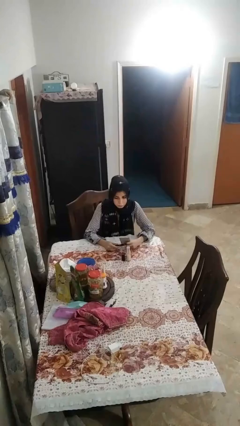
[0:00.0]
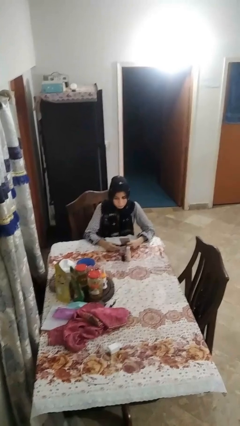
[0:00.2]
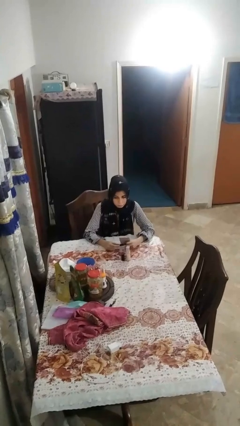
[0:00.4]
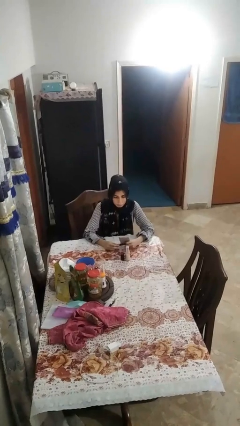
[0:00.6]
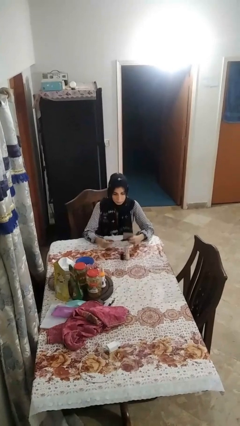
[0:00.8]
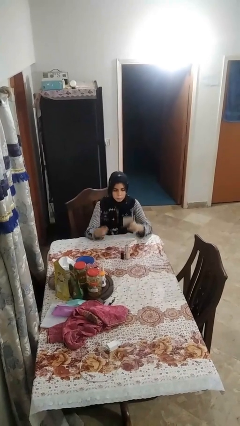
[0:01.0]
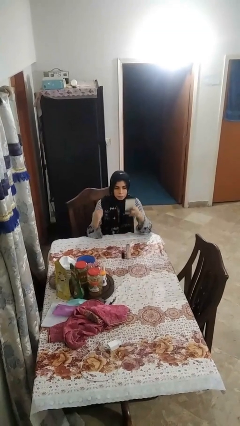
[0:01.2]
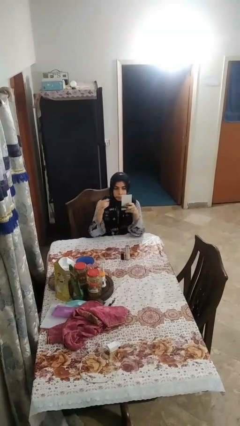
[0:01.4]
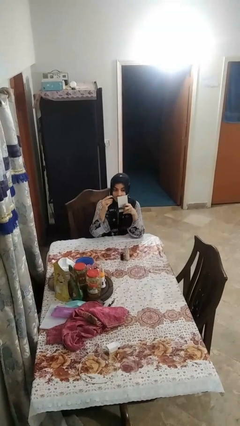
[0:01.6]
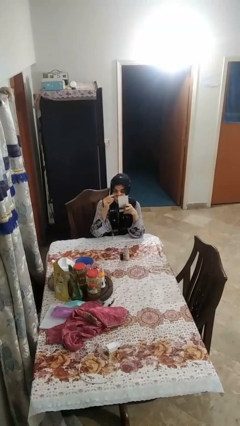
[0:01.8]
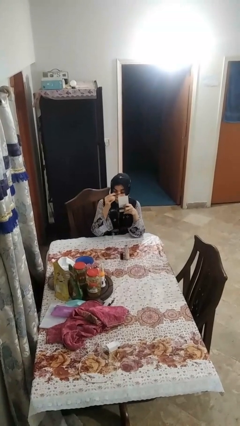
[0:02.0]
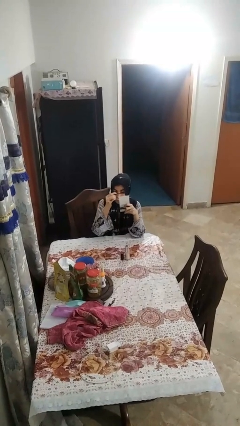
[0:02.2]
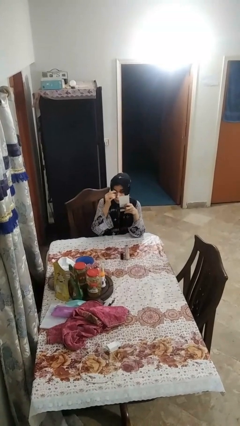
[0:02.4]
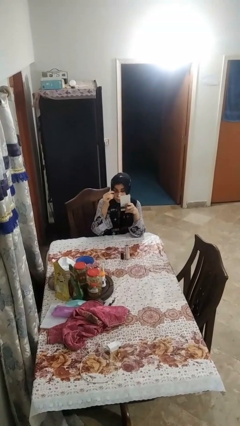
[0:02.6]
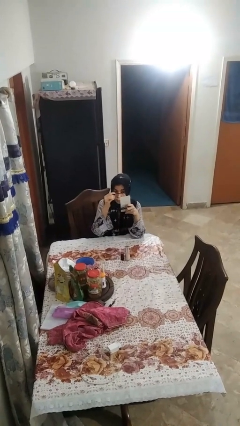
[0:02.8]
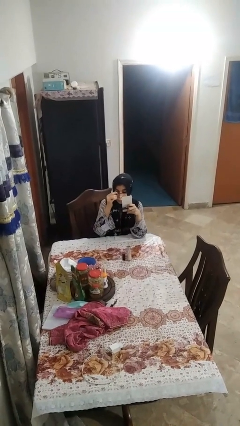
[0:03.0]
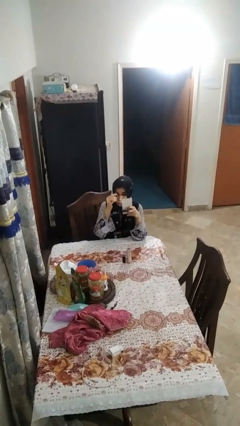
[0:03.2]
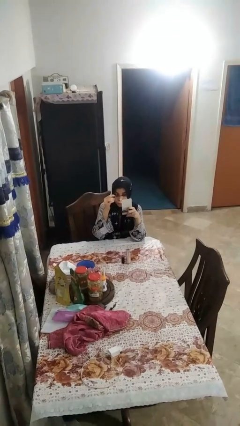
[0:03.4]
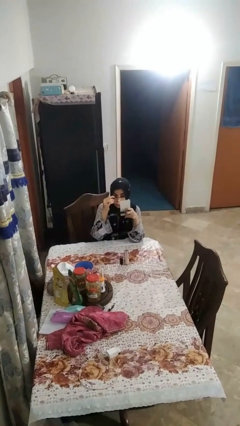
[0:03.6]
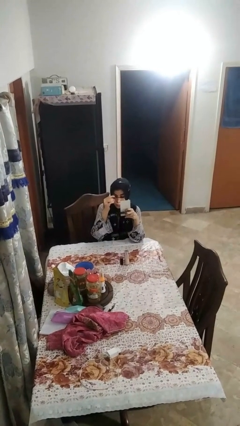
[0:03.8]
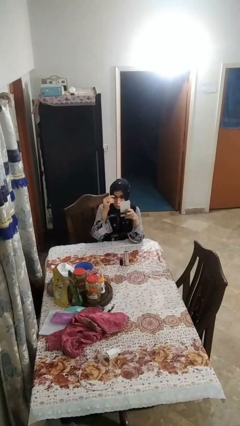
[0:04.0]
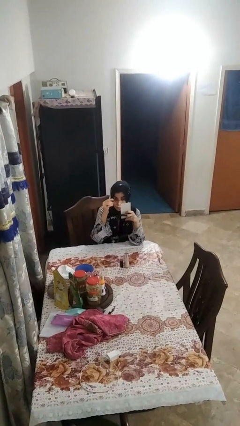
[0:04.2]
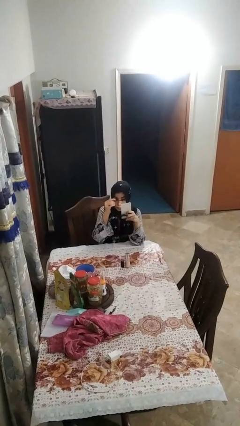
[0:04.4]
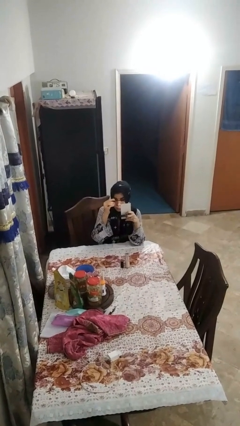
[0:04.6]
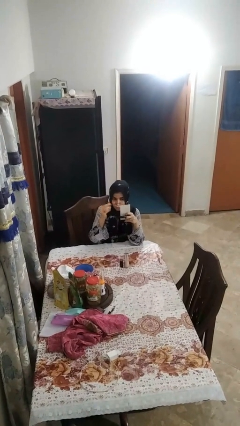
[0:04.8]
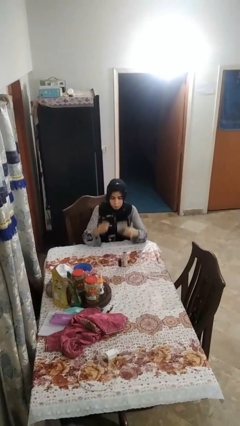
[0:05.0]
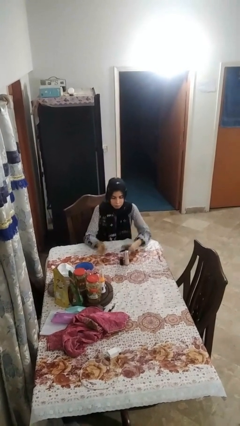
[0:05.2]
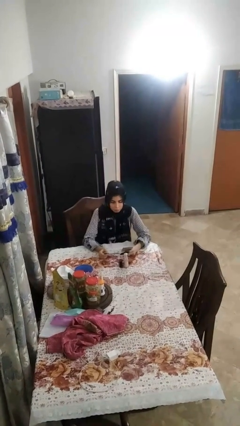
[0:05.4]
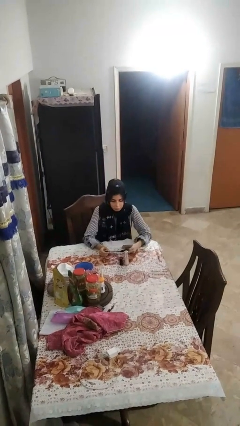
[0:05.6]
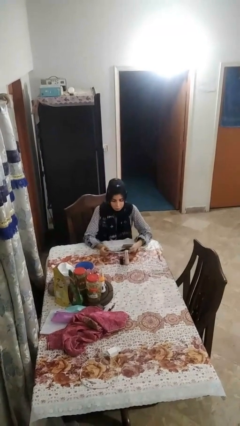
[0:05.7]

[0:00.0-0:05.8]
person applies eye makeup

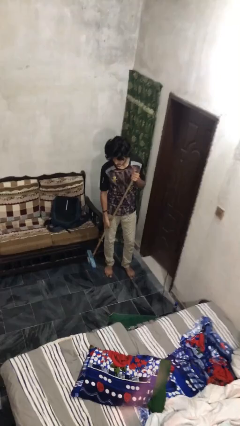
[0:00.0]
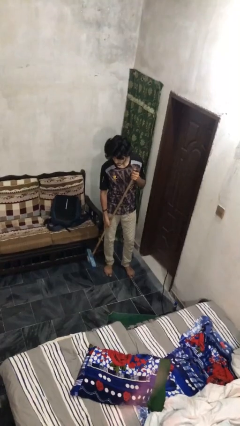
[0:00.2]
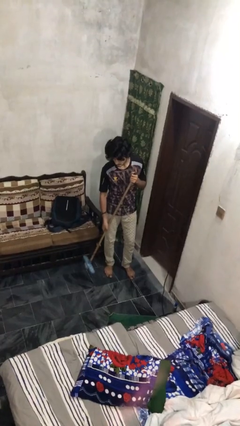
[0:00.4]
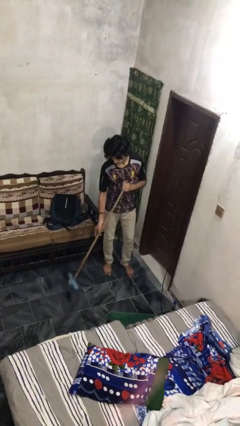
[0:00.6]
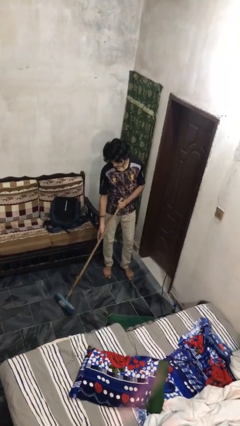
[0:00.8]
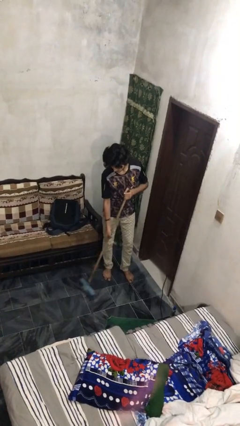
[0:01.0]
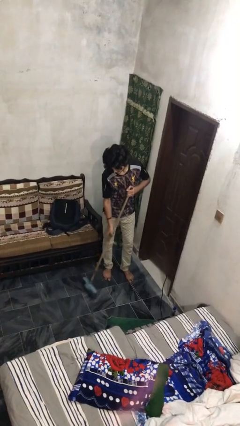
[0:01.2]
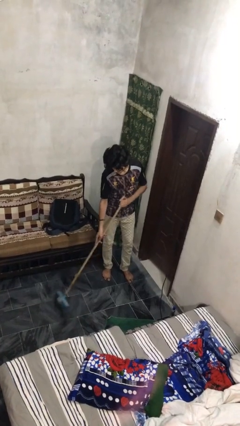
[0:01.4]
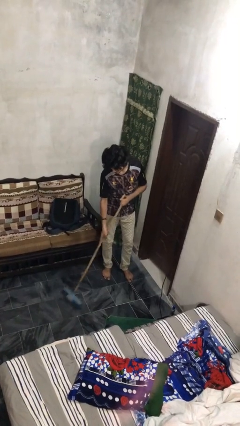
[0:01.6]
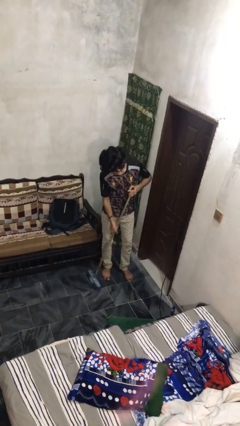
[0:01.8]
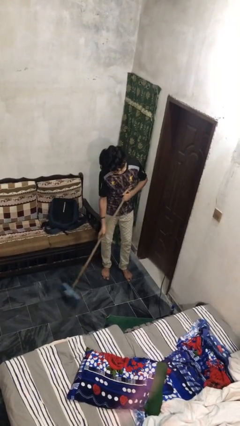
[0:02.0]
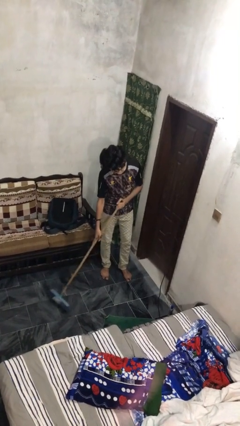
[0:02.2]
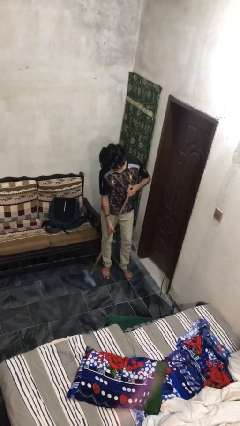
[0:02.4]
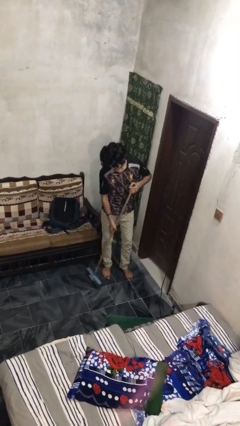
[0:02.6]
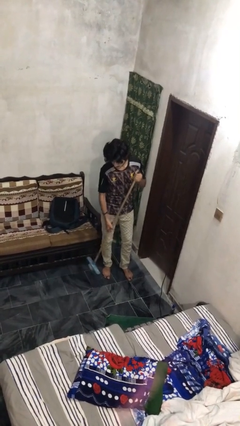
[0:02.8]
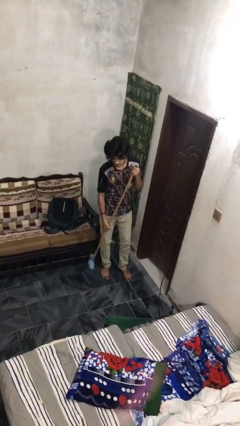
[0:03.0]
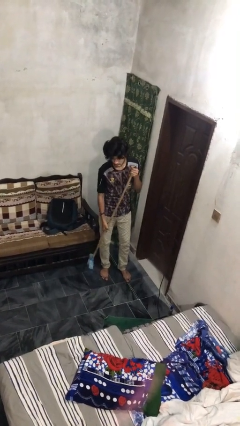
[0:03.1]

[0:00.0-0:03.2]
person sweeps floor

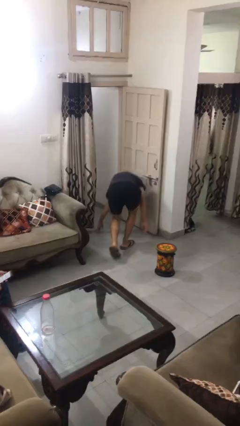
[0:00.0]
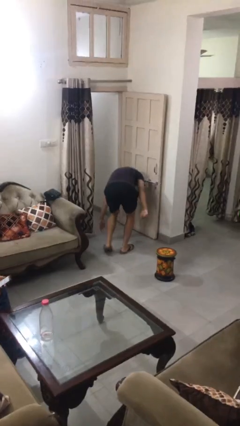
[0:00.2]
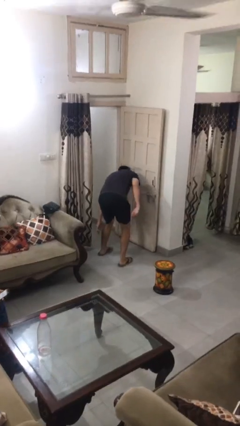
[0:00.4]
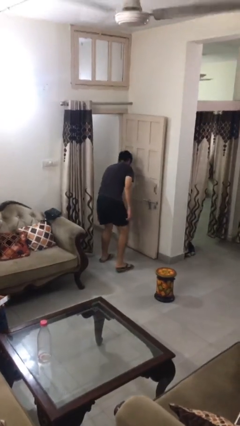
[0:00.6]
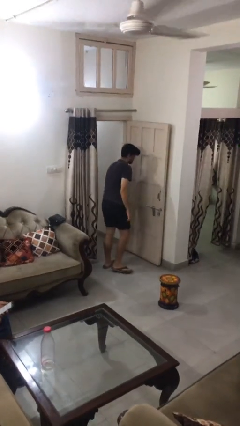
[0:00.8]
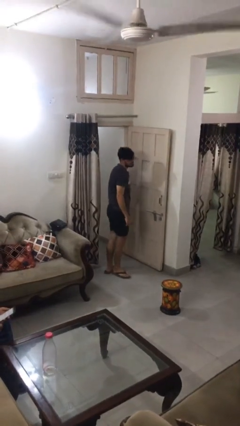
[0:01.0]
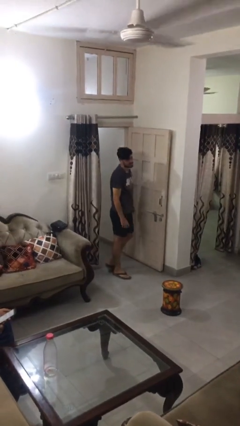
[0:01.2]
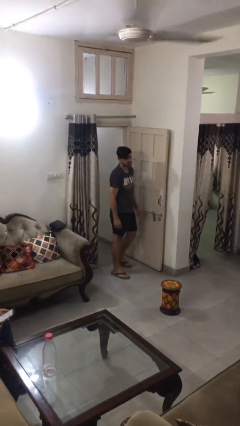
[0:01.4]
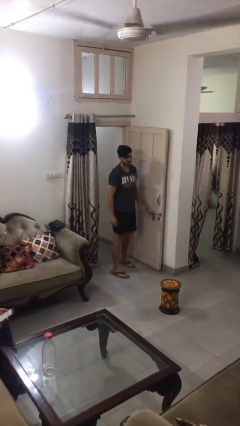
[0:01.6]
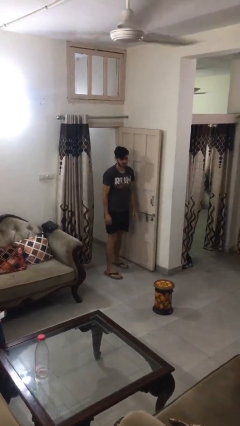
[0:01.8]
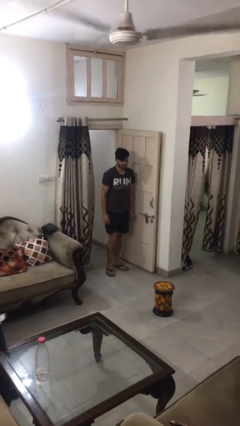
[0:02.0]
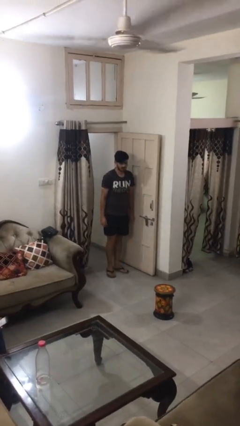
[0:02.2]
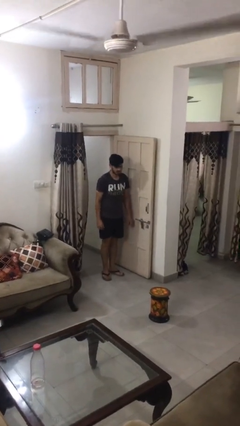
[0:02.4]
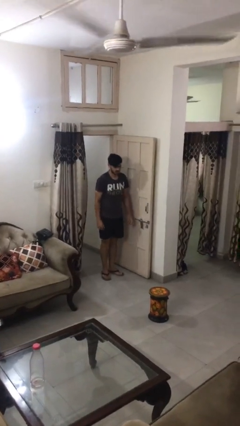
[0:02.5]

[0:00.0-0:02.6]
person stands up from floor

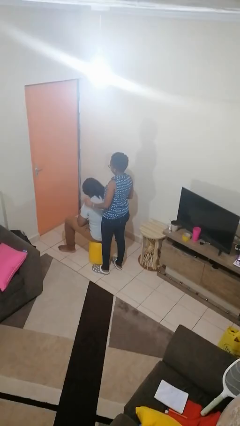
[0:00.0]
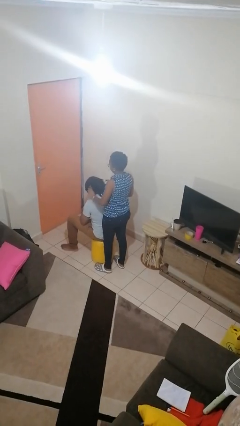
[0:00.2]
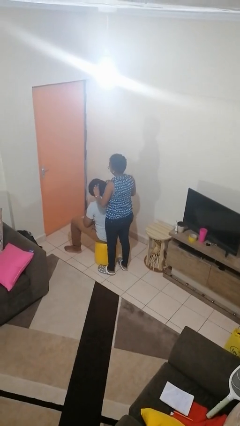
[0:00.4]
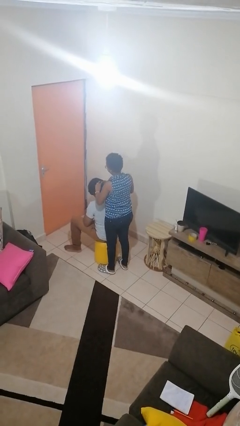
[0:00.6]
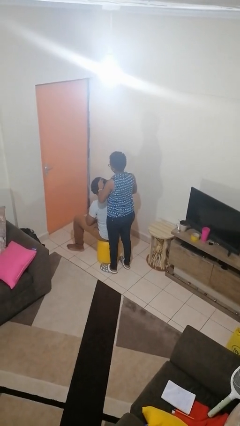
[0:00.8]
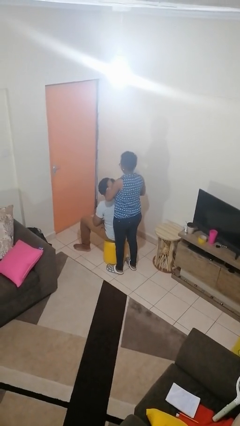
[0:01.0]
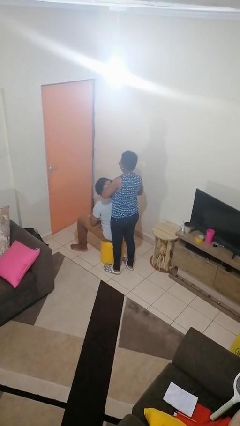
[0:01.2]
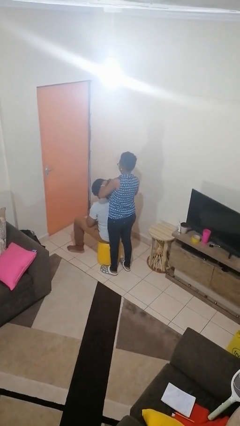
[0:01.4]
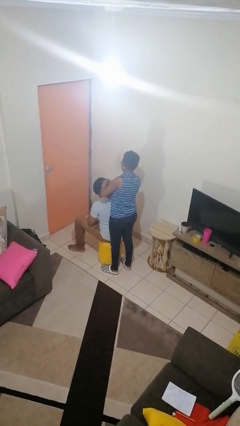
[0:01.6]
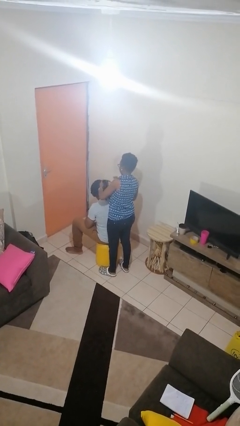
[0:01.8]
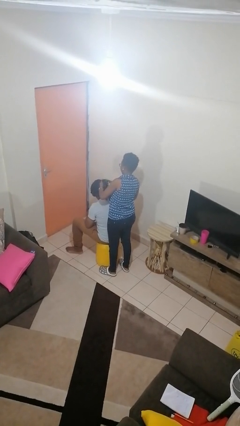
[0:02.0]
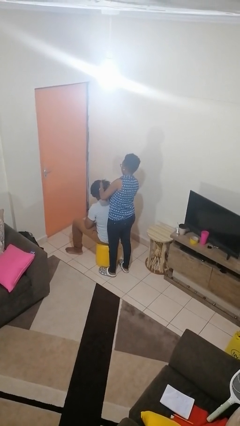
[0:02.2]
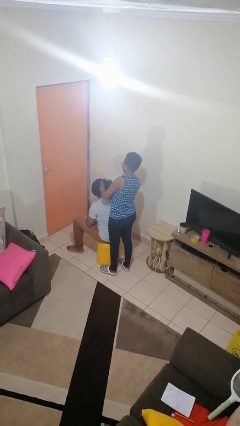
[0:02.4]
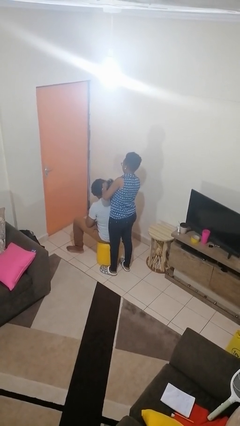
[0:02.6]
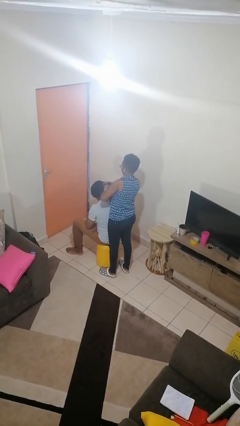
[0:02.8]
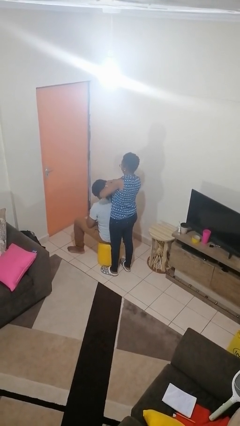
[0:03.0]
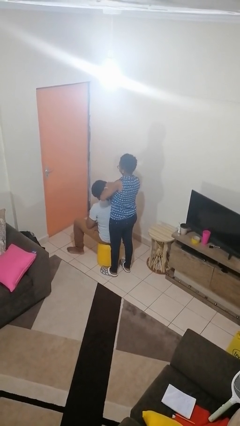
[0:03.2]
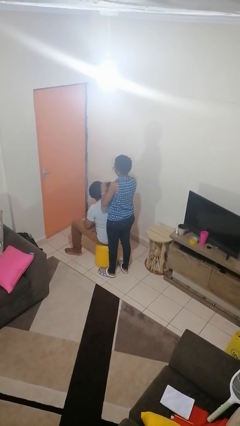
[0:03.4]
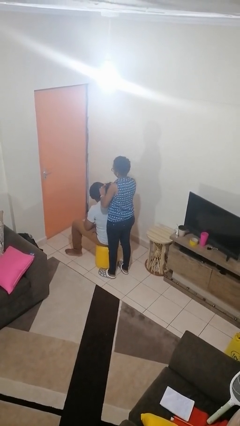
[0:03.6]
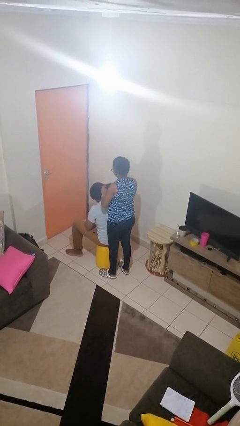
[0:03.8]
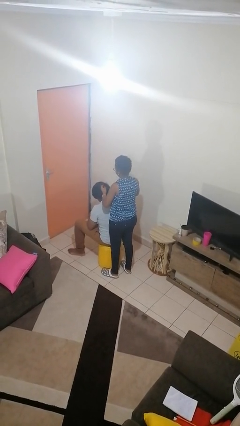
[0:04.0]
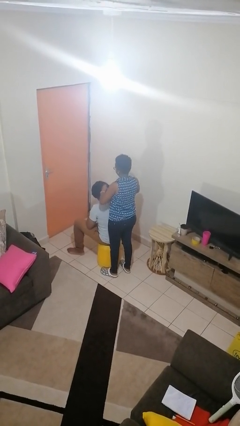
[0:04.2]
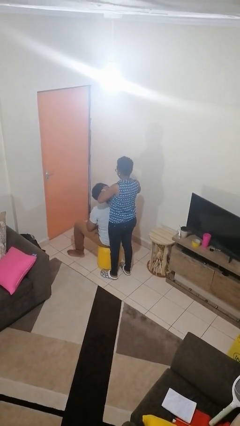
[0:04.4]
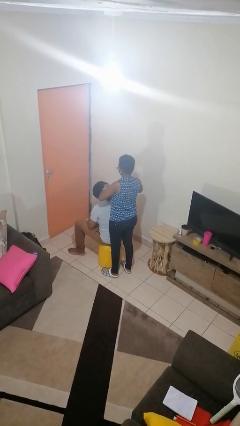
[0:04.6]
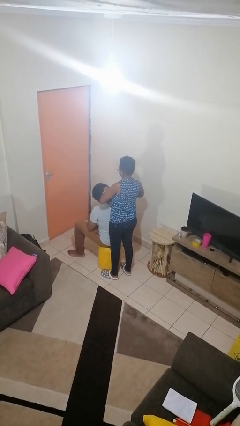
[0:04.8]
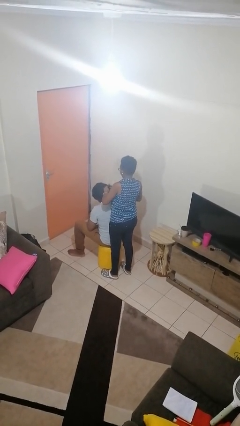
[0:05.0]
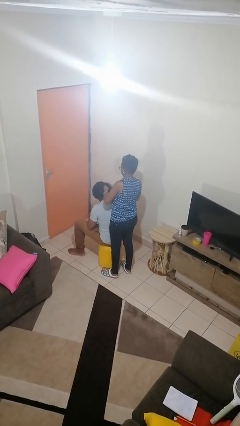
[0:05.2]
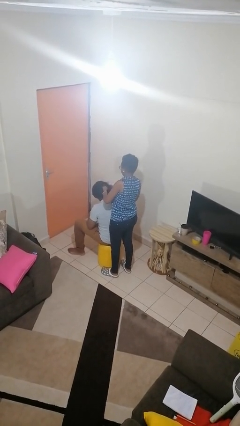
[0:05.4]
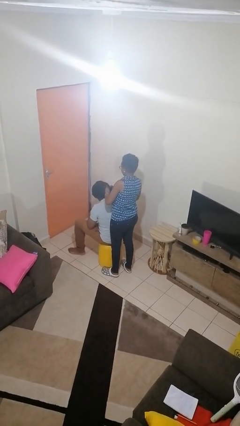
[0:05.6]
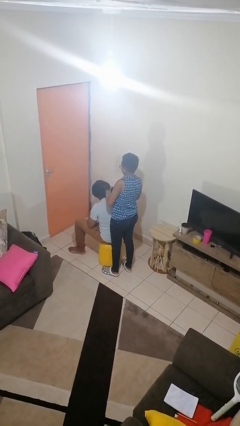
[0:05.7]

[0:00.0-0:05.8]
person braids hair of person

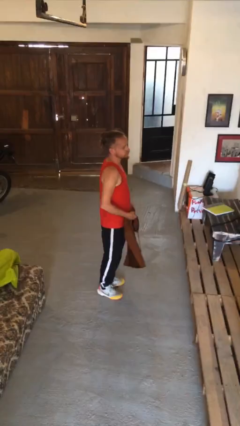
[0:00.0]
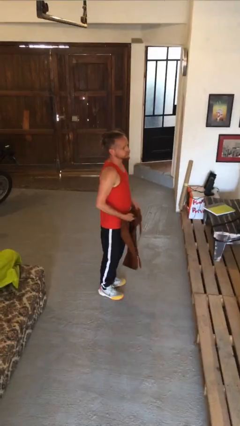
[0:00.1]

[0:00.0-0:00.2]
person puts on apron
